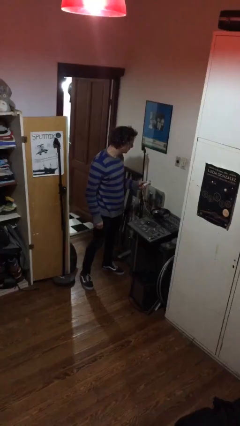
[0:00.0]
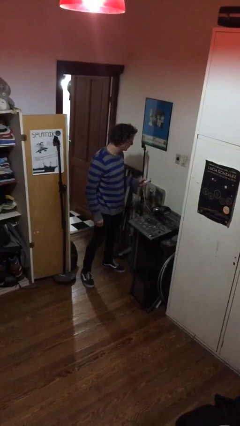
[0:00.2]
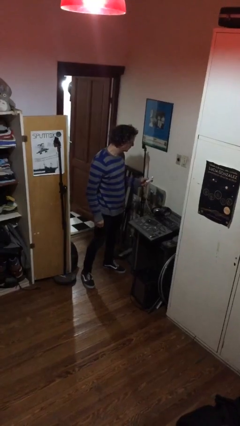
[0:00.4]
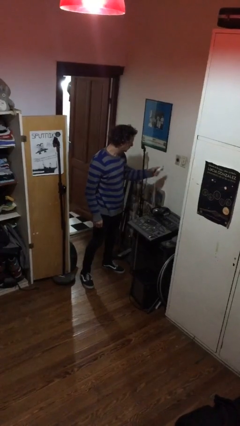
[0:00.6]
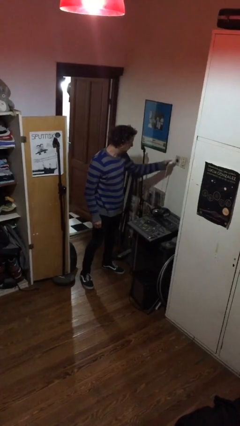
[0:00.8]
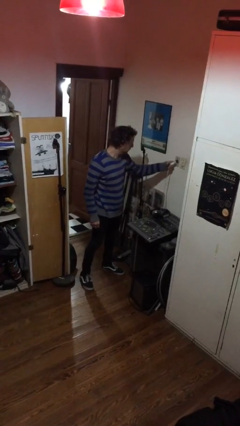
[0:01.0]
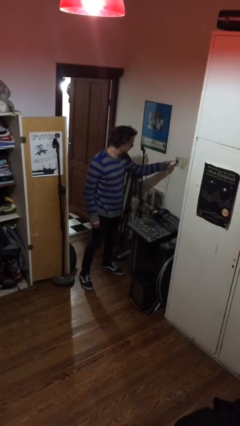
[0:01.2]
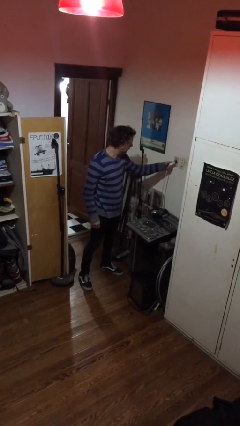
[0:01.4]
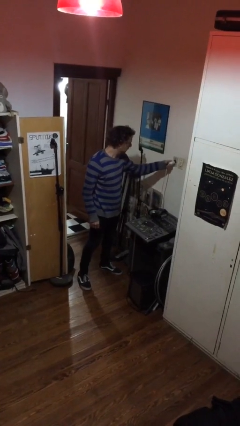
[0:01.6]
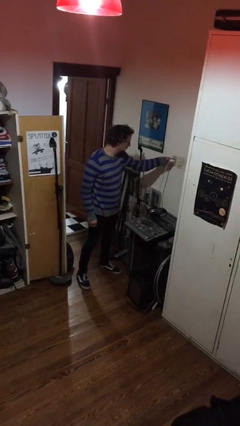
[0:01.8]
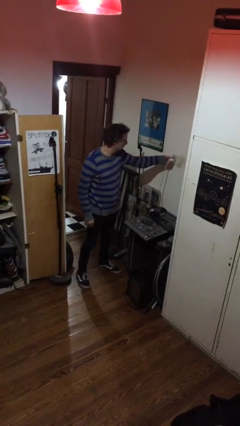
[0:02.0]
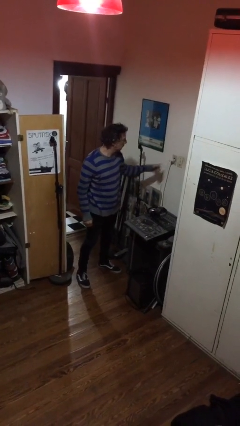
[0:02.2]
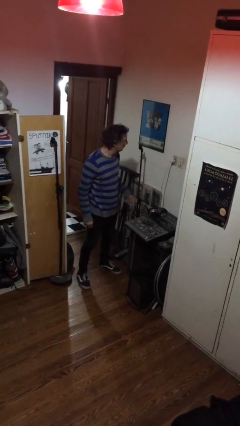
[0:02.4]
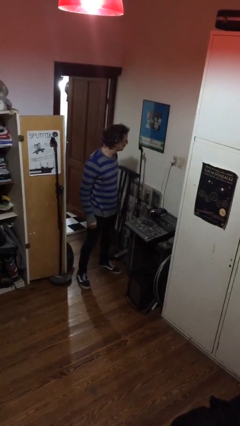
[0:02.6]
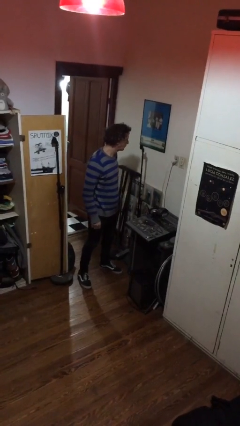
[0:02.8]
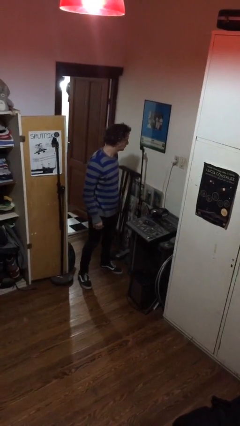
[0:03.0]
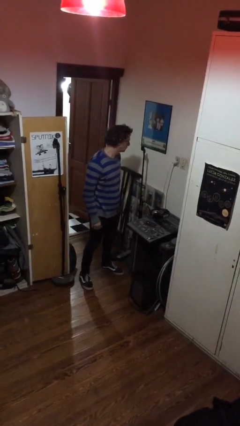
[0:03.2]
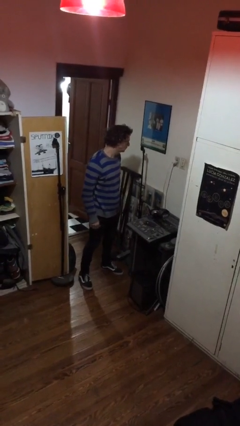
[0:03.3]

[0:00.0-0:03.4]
person plugs into electrical socket

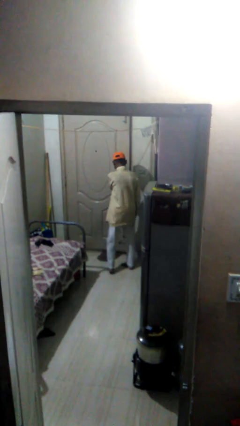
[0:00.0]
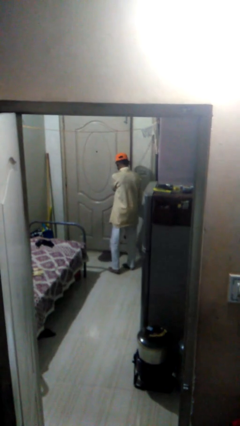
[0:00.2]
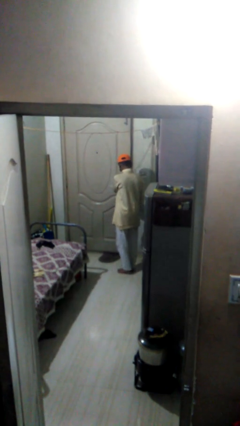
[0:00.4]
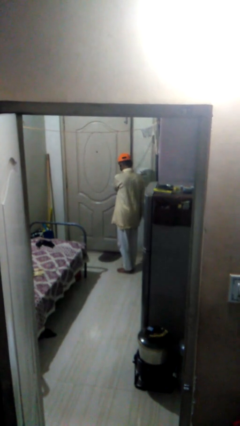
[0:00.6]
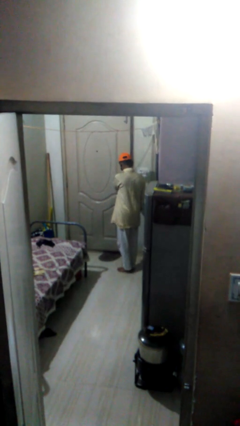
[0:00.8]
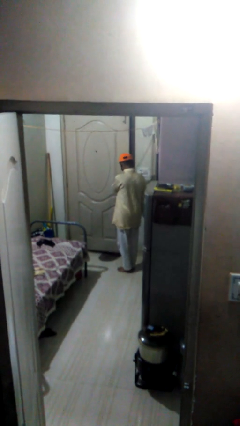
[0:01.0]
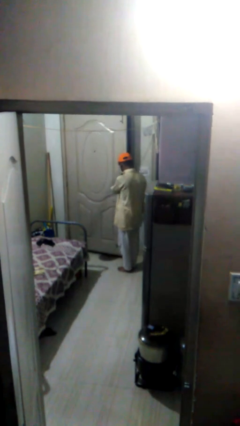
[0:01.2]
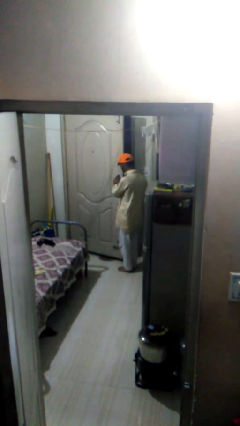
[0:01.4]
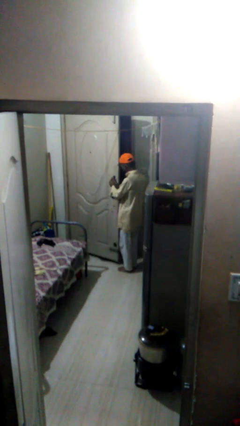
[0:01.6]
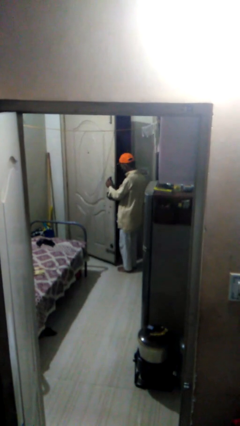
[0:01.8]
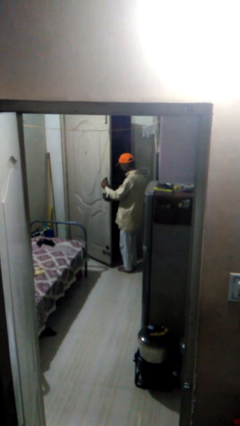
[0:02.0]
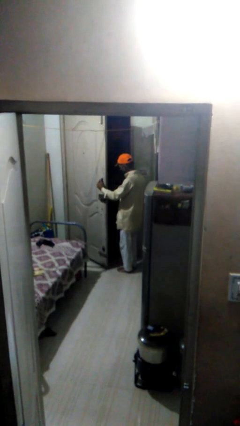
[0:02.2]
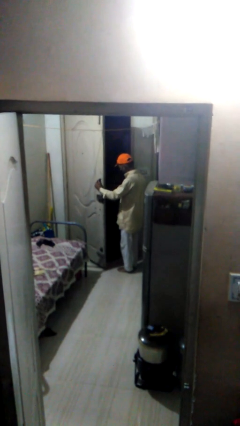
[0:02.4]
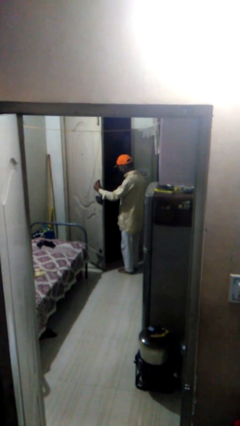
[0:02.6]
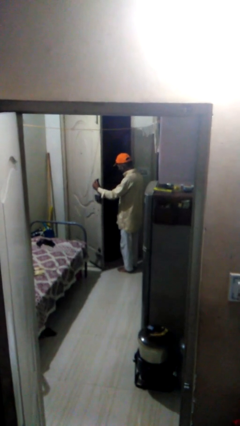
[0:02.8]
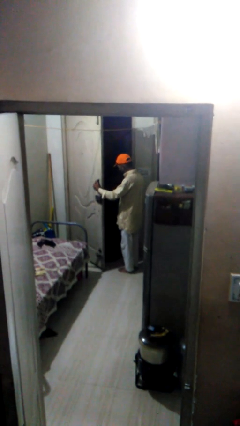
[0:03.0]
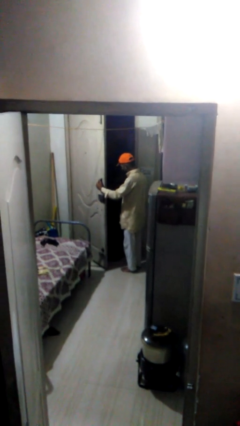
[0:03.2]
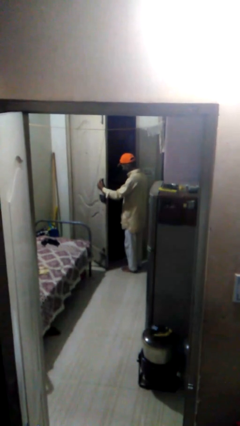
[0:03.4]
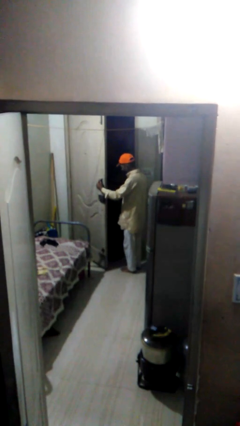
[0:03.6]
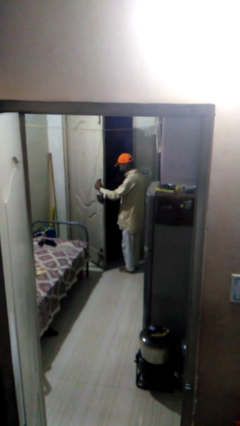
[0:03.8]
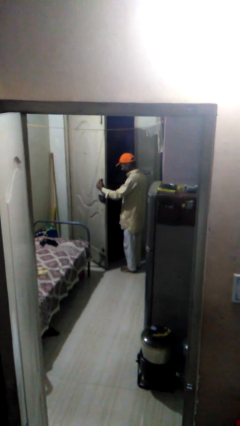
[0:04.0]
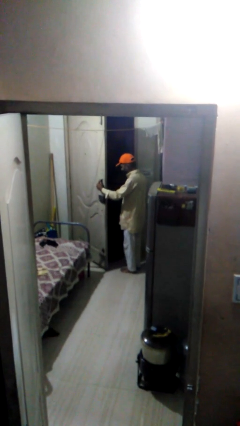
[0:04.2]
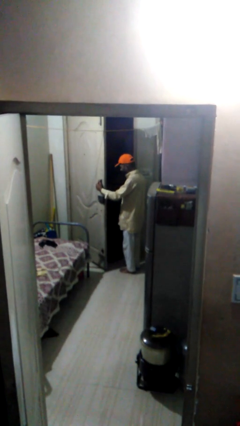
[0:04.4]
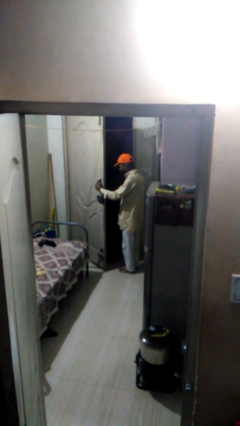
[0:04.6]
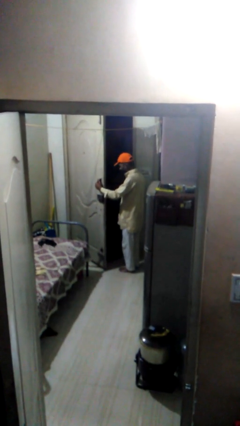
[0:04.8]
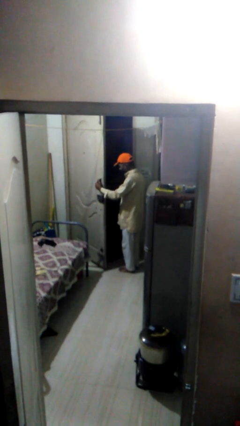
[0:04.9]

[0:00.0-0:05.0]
person opens facility door

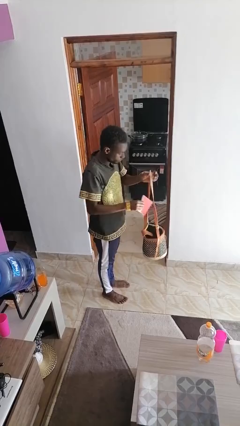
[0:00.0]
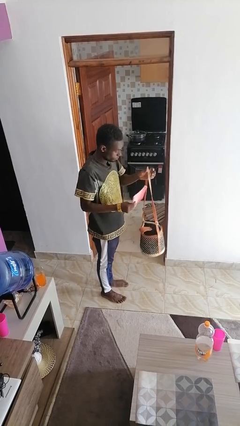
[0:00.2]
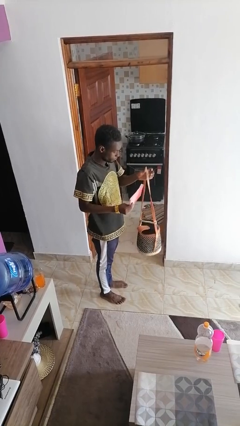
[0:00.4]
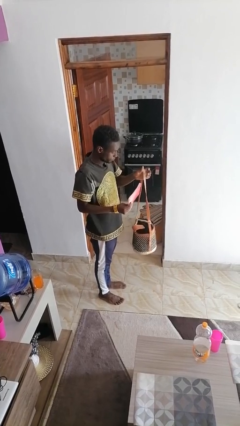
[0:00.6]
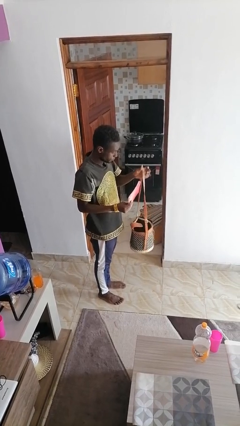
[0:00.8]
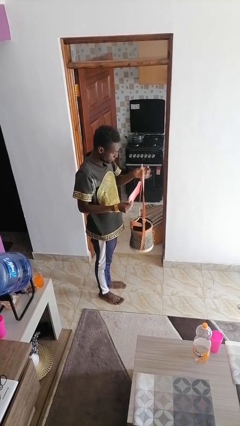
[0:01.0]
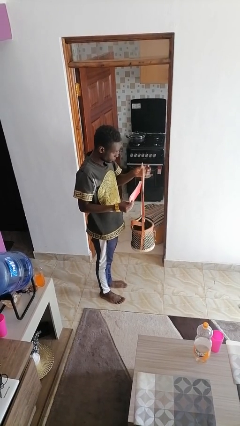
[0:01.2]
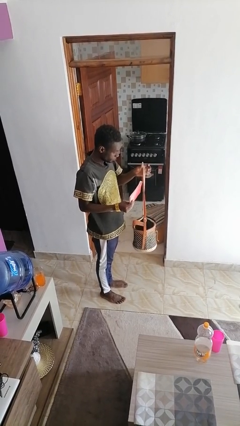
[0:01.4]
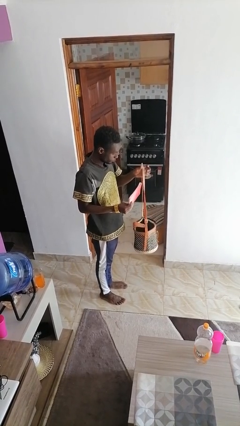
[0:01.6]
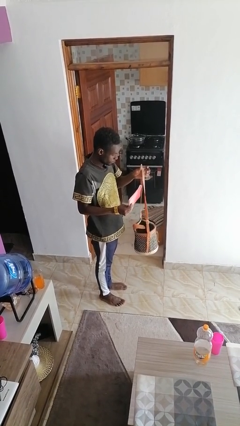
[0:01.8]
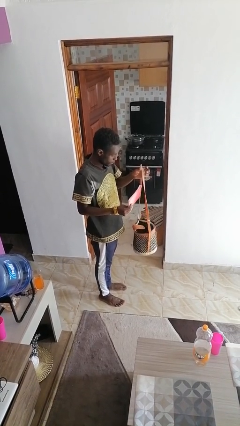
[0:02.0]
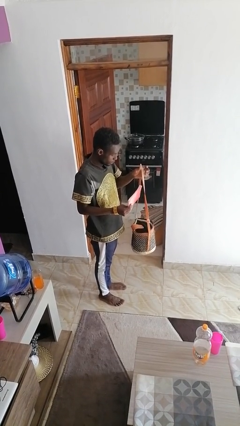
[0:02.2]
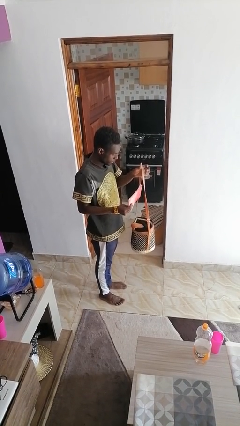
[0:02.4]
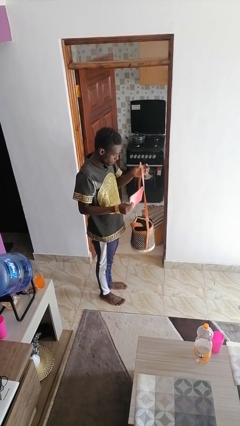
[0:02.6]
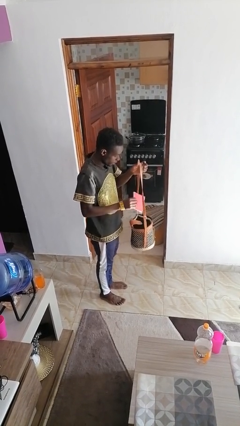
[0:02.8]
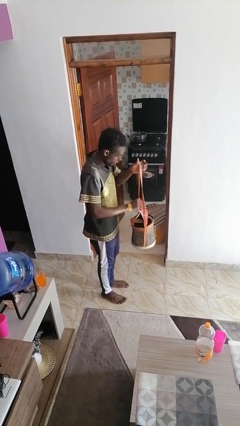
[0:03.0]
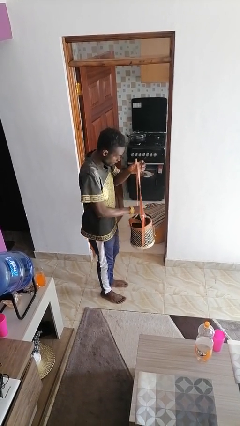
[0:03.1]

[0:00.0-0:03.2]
person takes object from purse

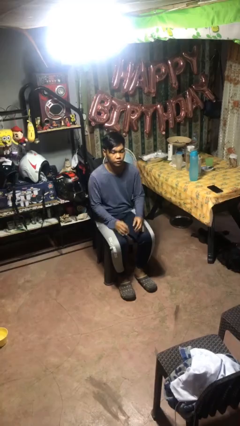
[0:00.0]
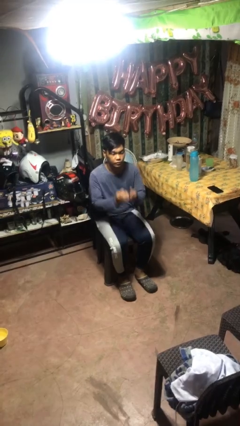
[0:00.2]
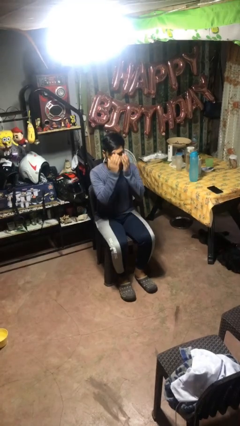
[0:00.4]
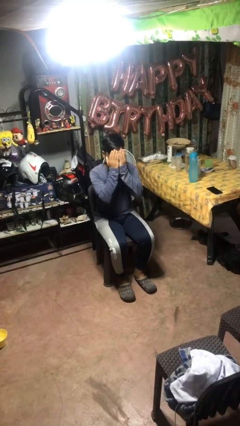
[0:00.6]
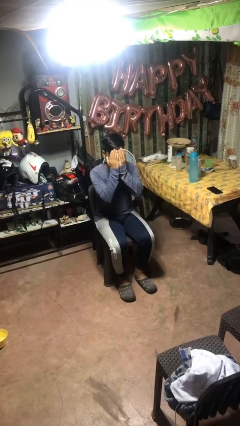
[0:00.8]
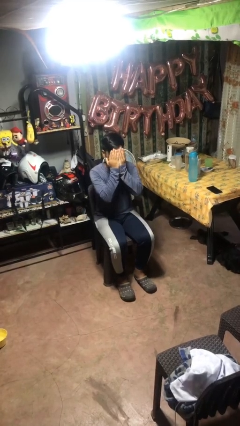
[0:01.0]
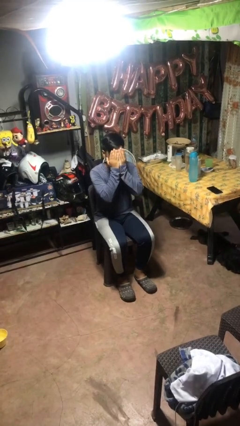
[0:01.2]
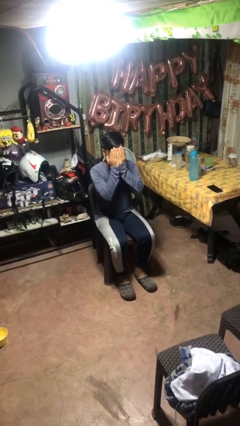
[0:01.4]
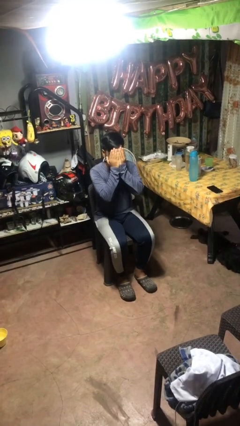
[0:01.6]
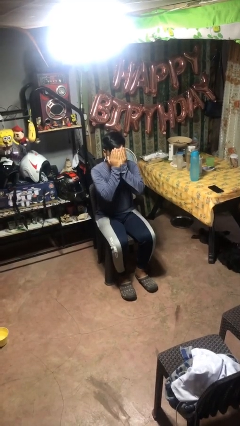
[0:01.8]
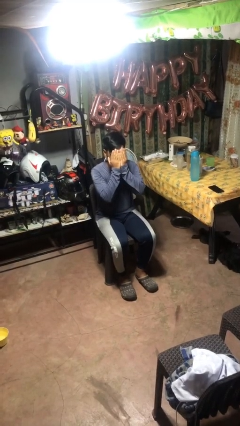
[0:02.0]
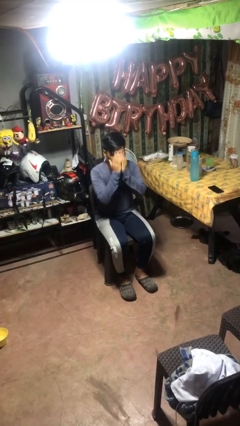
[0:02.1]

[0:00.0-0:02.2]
person covers face with hands

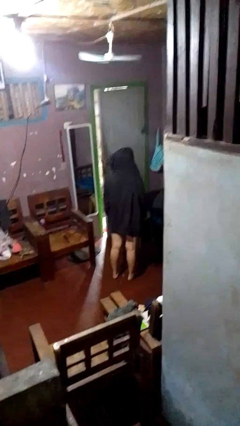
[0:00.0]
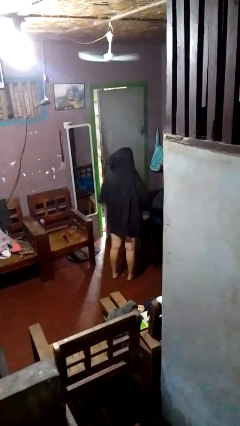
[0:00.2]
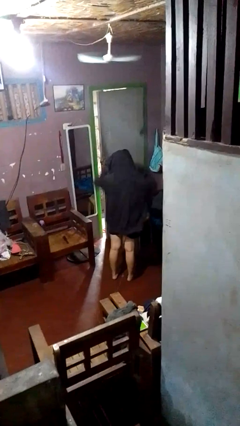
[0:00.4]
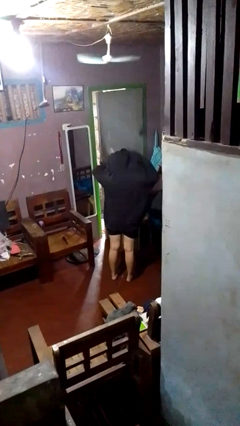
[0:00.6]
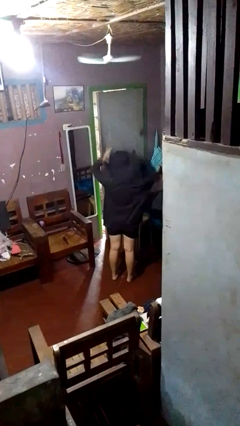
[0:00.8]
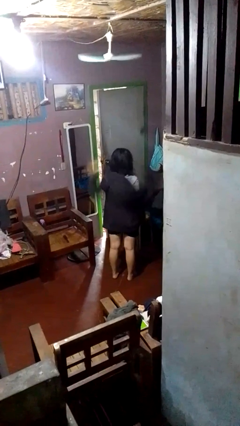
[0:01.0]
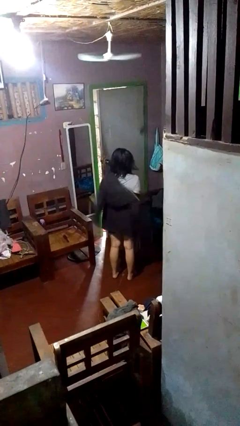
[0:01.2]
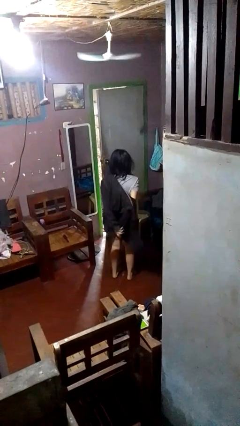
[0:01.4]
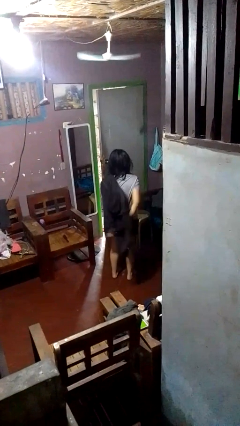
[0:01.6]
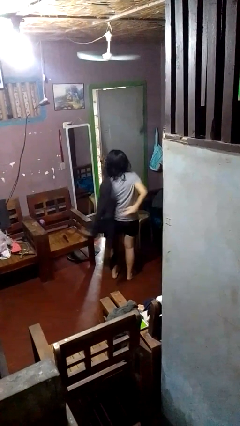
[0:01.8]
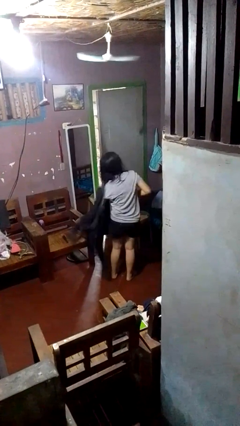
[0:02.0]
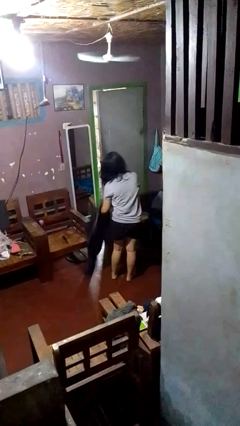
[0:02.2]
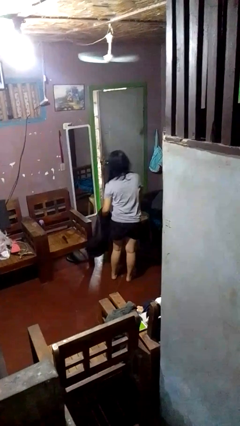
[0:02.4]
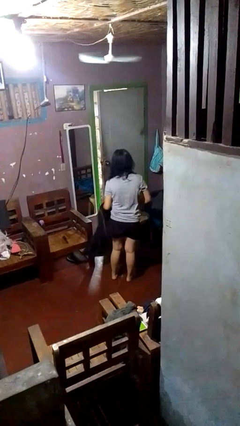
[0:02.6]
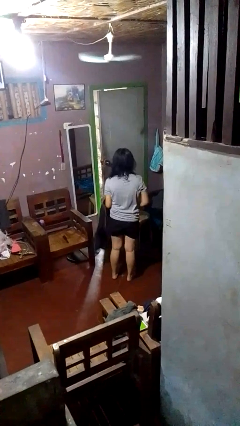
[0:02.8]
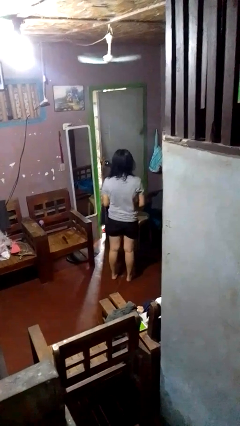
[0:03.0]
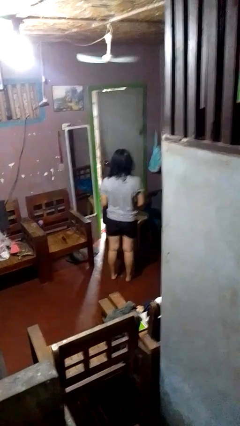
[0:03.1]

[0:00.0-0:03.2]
person takes off hoodie
